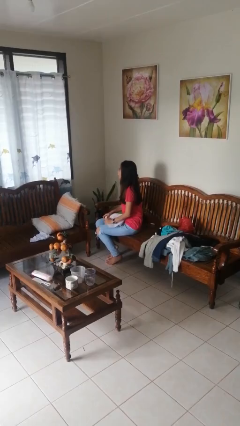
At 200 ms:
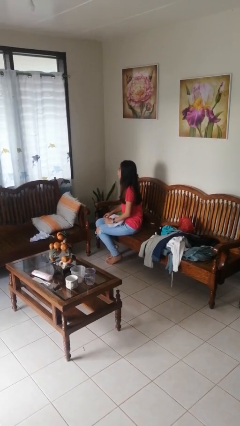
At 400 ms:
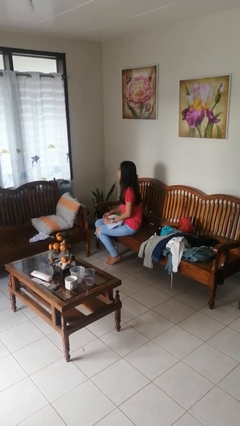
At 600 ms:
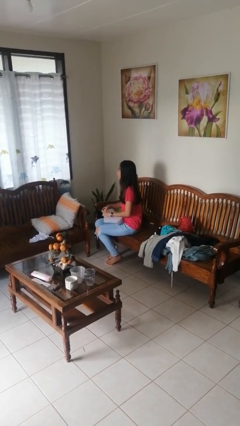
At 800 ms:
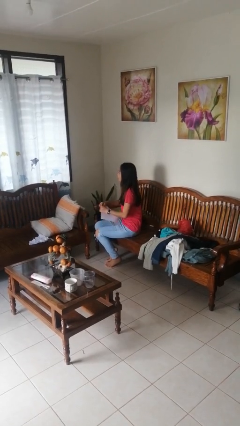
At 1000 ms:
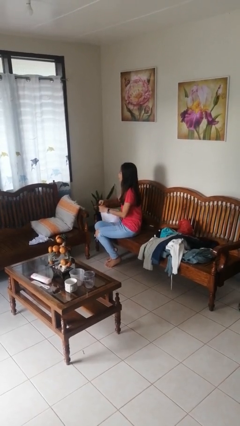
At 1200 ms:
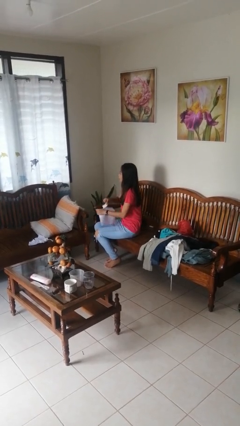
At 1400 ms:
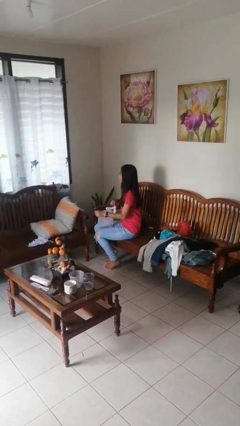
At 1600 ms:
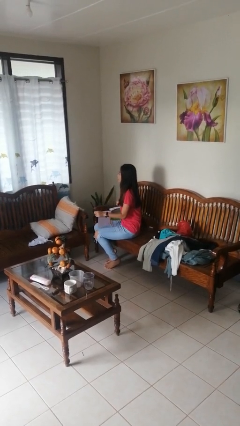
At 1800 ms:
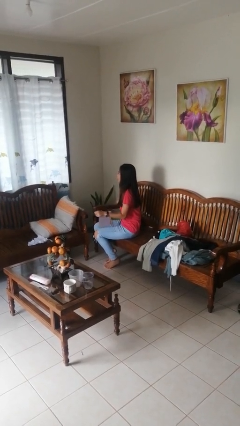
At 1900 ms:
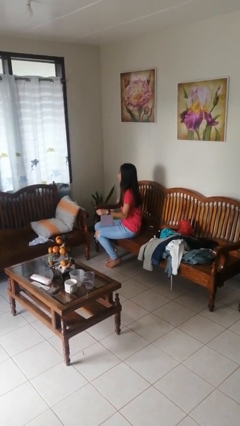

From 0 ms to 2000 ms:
person tears paper

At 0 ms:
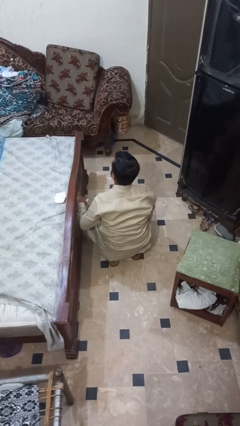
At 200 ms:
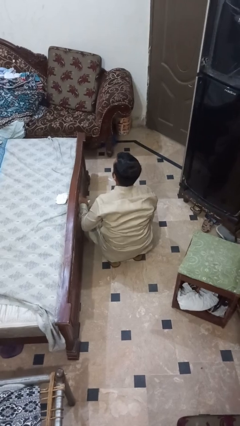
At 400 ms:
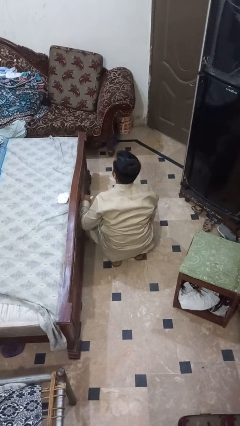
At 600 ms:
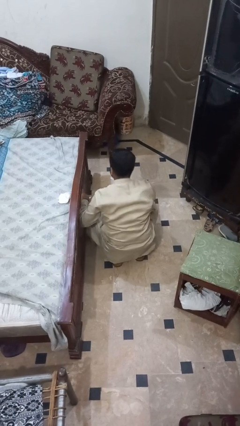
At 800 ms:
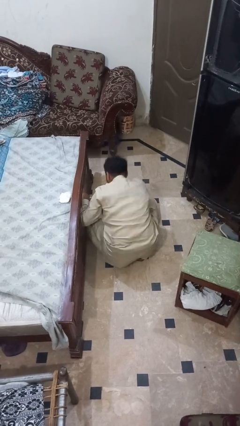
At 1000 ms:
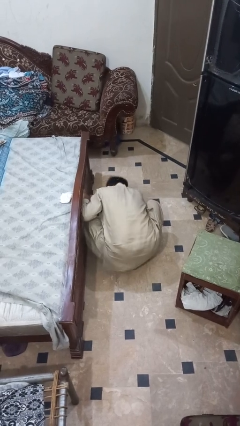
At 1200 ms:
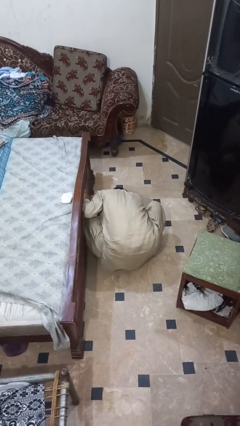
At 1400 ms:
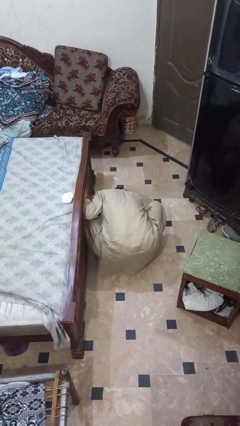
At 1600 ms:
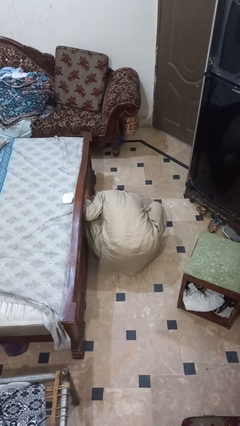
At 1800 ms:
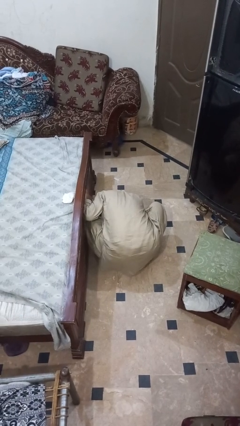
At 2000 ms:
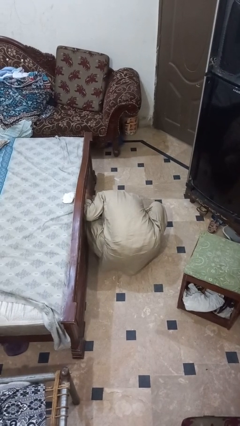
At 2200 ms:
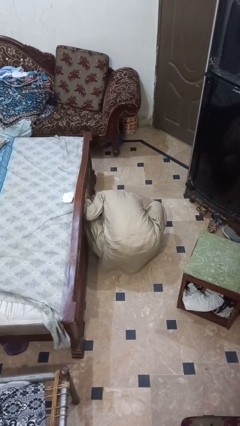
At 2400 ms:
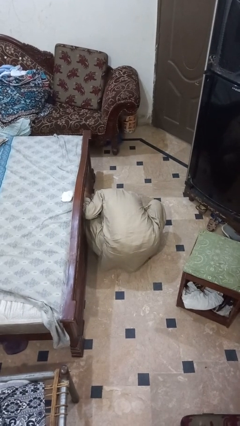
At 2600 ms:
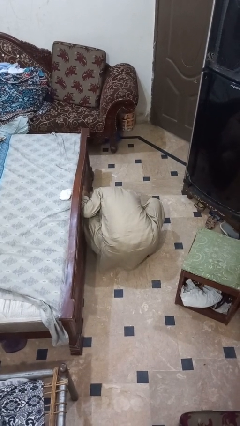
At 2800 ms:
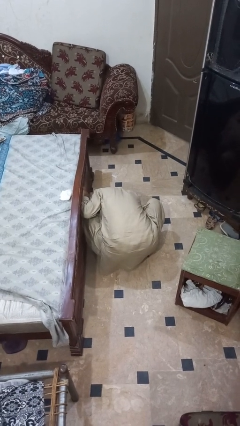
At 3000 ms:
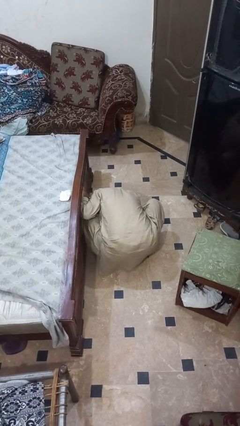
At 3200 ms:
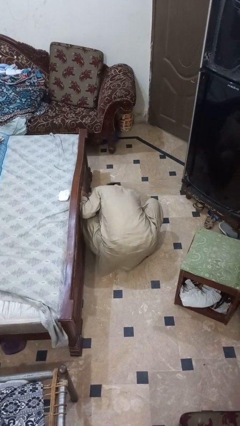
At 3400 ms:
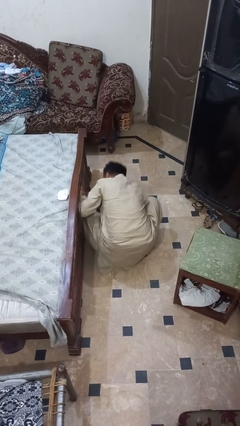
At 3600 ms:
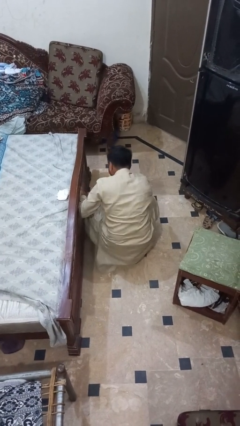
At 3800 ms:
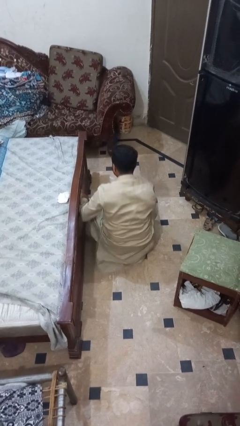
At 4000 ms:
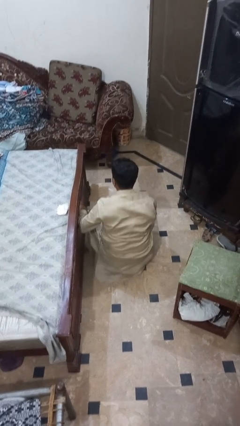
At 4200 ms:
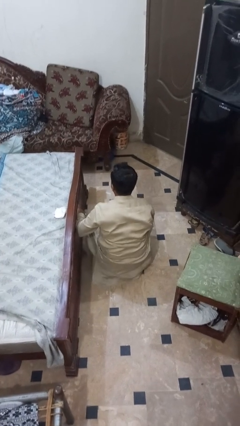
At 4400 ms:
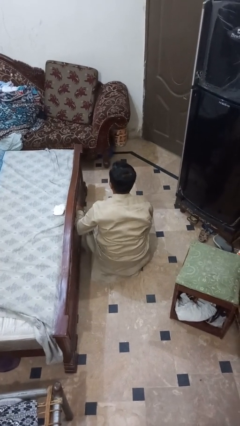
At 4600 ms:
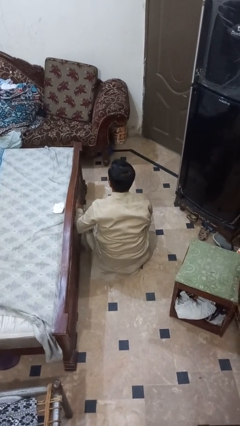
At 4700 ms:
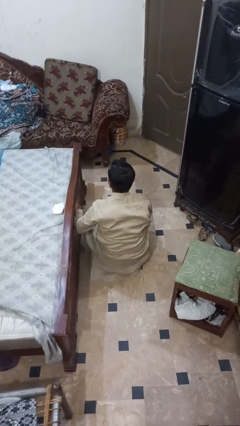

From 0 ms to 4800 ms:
person searches under bed

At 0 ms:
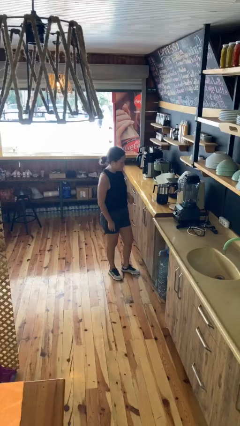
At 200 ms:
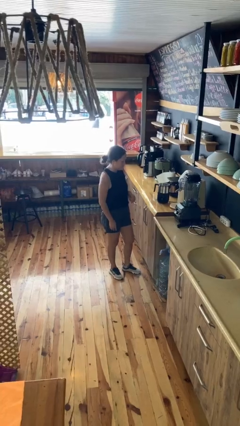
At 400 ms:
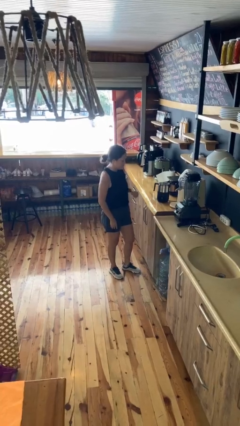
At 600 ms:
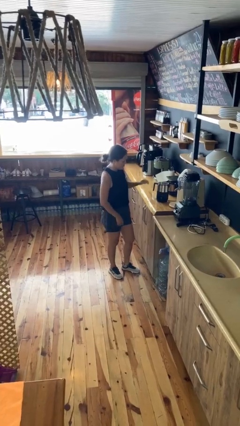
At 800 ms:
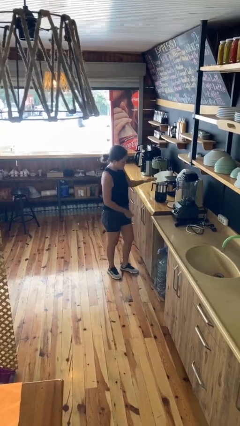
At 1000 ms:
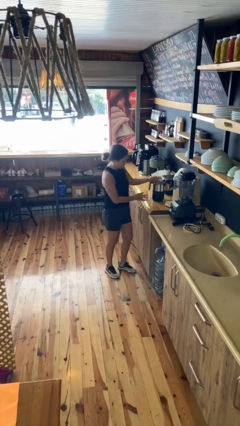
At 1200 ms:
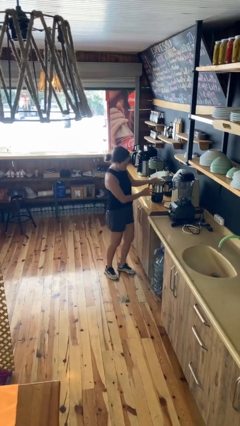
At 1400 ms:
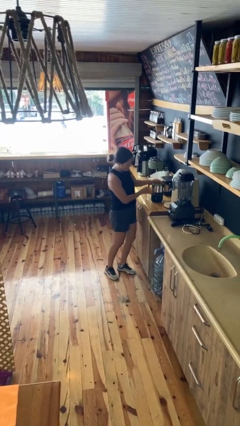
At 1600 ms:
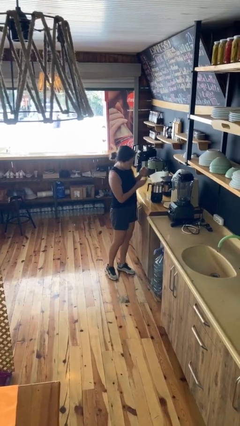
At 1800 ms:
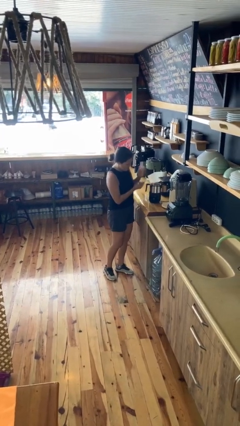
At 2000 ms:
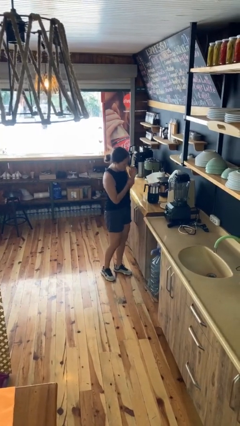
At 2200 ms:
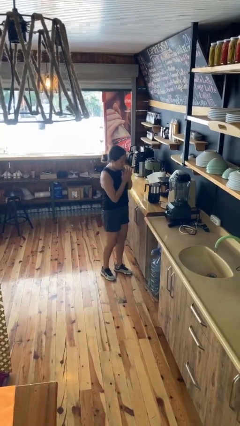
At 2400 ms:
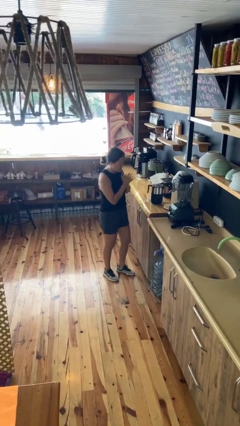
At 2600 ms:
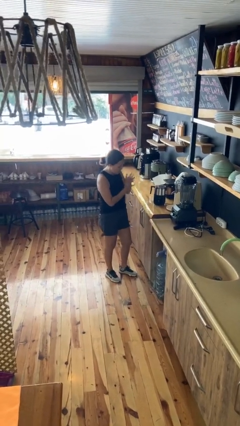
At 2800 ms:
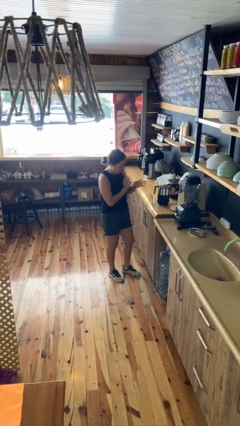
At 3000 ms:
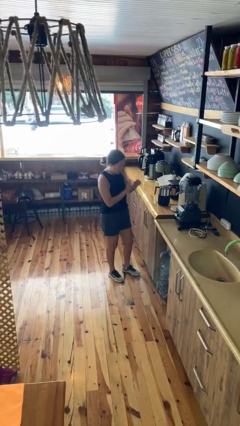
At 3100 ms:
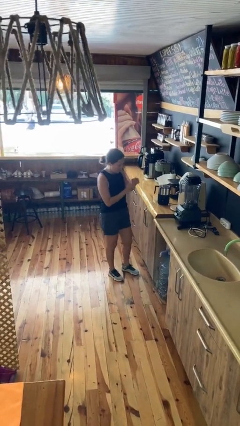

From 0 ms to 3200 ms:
person burns hand

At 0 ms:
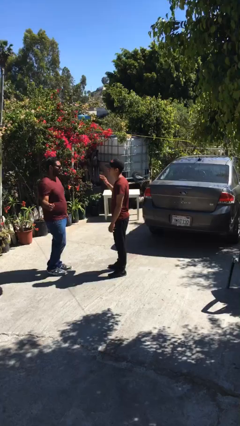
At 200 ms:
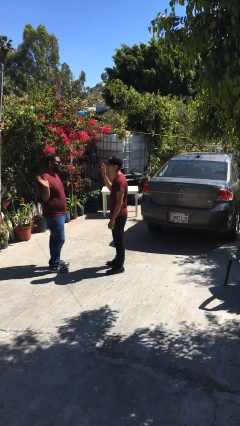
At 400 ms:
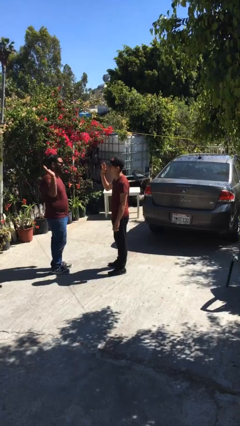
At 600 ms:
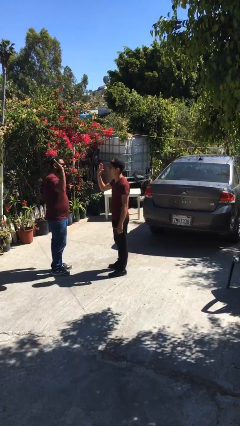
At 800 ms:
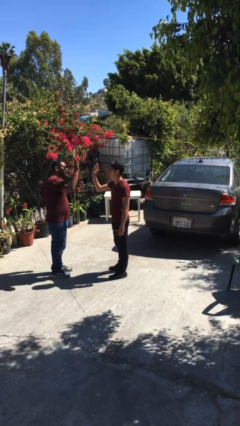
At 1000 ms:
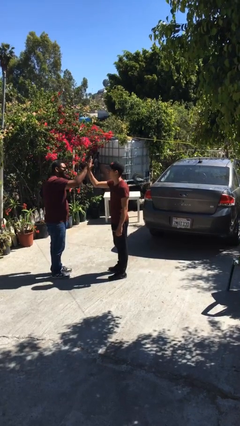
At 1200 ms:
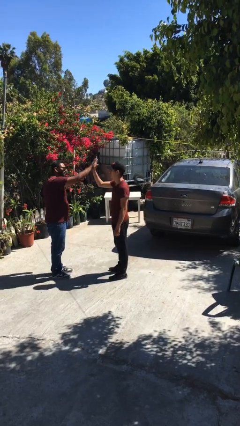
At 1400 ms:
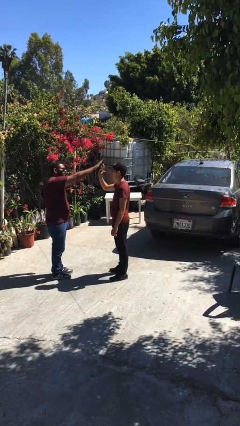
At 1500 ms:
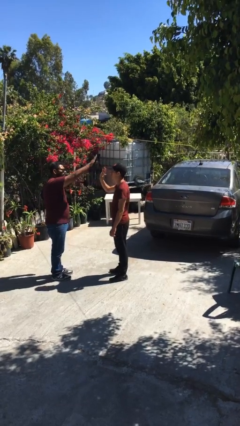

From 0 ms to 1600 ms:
person highfives hand

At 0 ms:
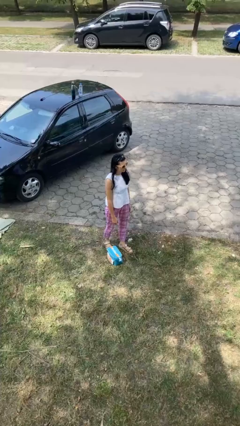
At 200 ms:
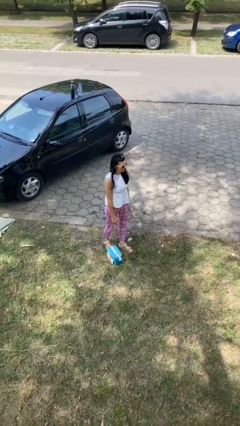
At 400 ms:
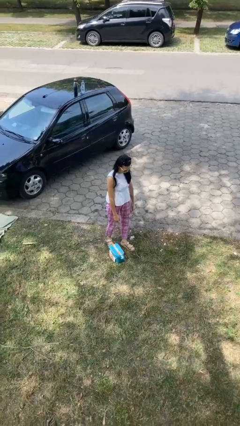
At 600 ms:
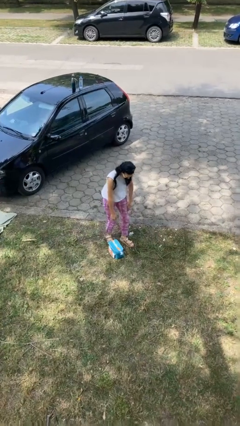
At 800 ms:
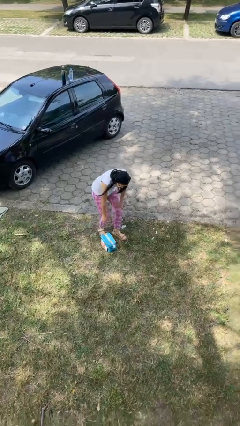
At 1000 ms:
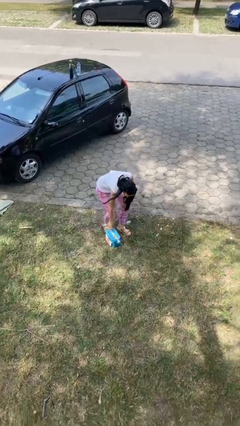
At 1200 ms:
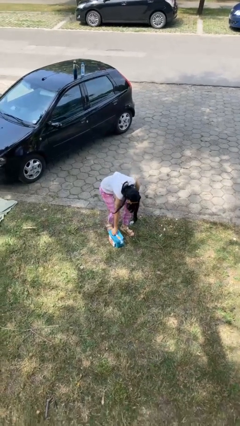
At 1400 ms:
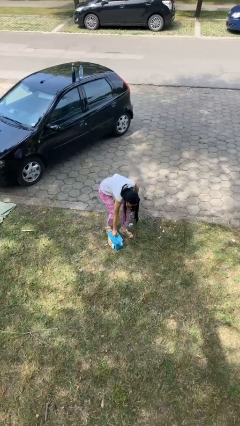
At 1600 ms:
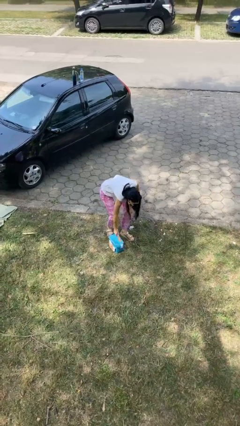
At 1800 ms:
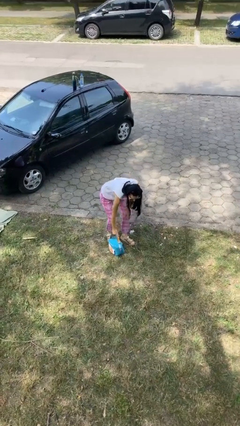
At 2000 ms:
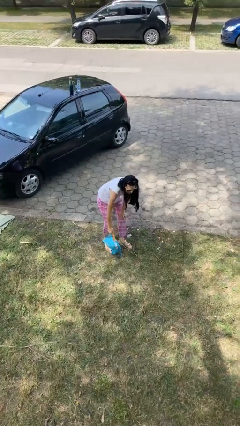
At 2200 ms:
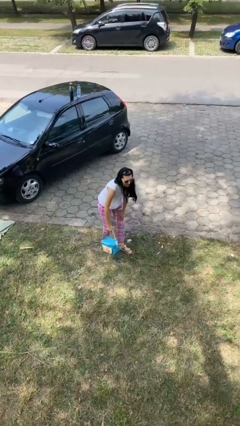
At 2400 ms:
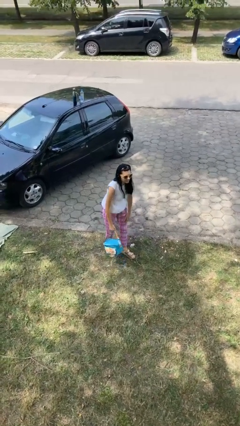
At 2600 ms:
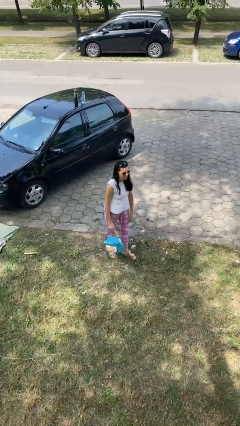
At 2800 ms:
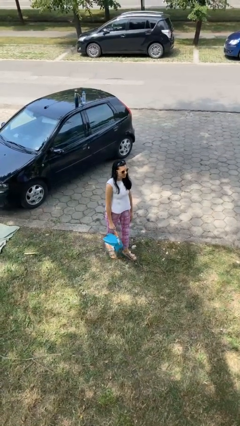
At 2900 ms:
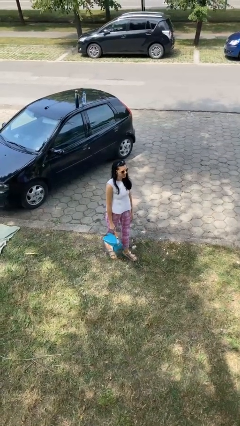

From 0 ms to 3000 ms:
person picks up object from floor

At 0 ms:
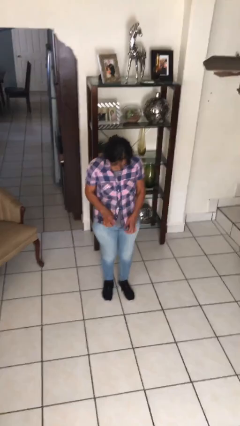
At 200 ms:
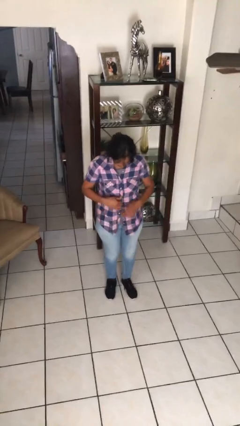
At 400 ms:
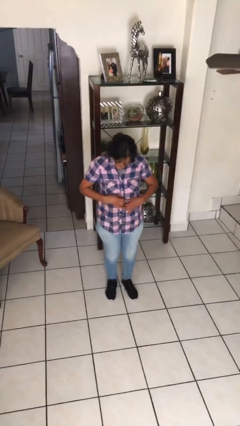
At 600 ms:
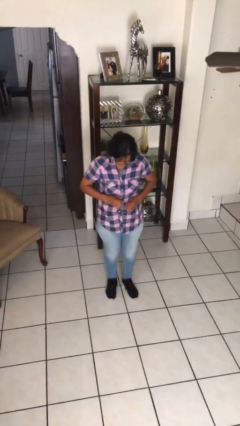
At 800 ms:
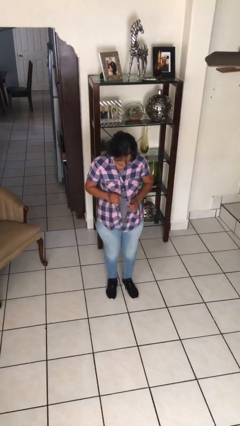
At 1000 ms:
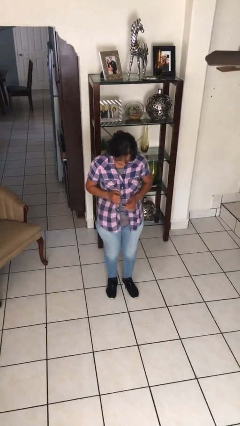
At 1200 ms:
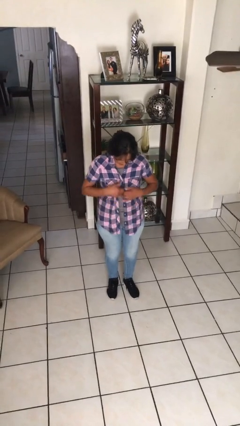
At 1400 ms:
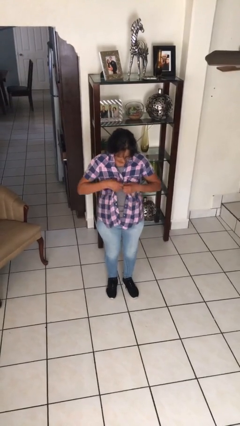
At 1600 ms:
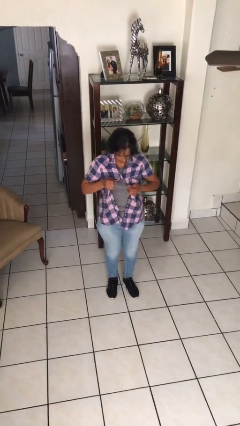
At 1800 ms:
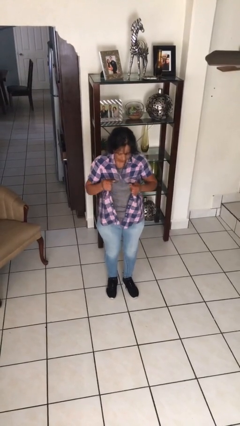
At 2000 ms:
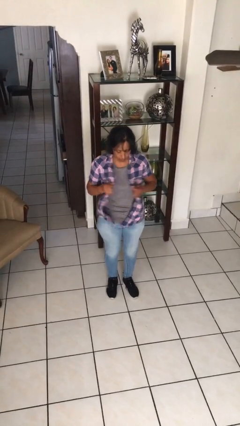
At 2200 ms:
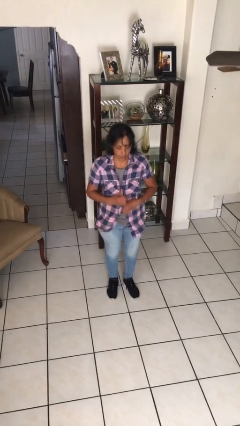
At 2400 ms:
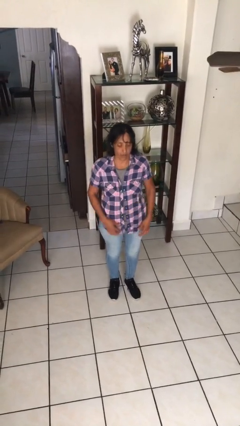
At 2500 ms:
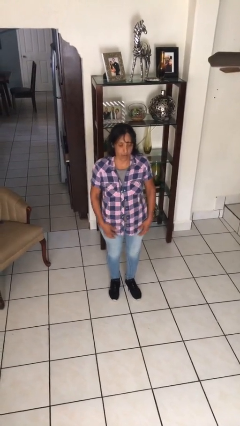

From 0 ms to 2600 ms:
person unbuttons shirt
